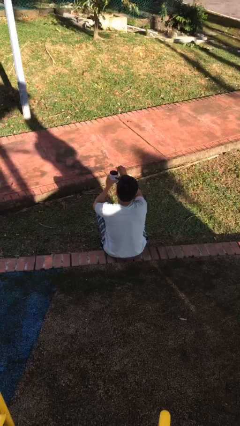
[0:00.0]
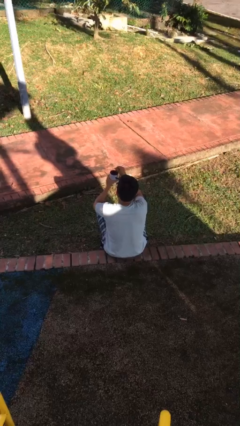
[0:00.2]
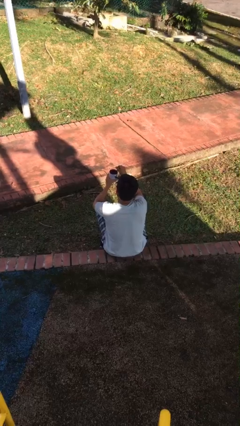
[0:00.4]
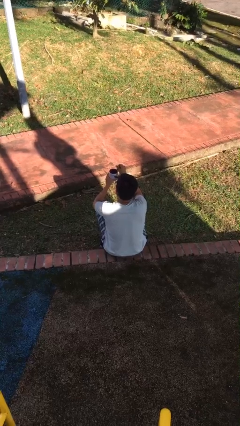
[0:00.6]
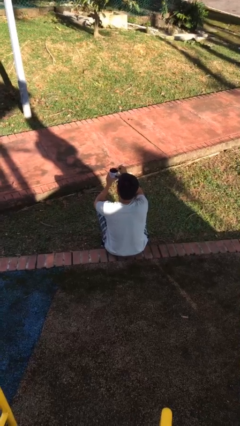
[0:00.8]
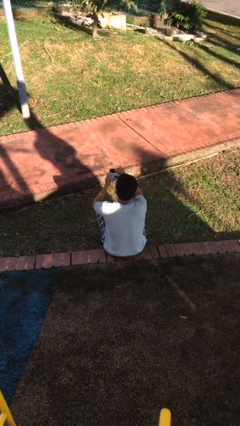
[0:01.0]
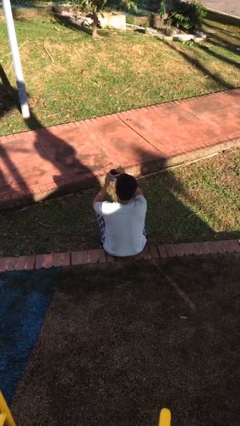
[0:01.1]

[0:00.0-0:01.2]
person stirs mug

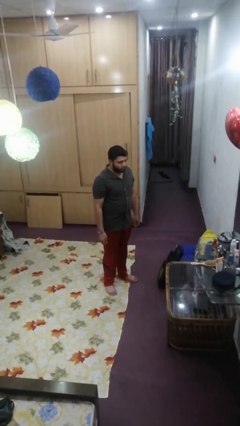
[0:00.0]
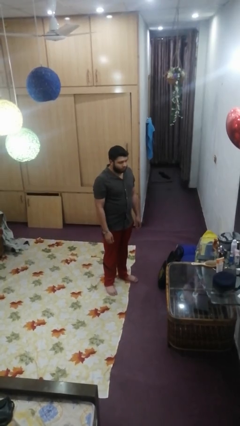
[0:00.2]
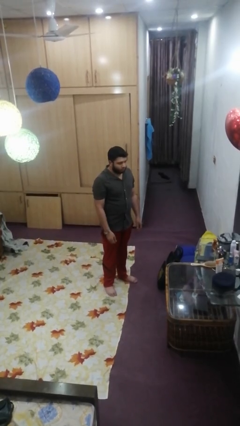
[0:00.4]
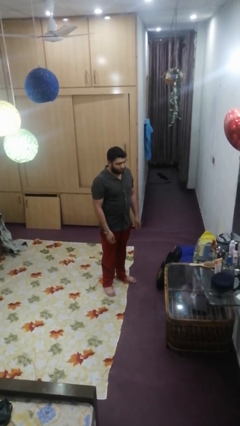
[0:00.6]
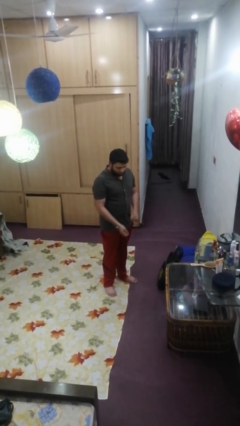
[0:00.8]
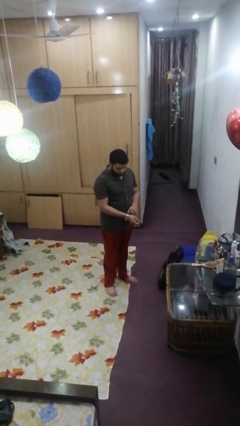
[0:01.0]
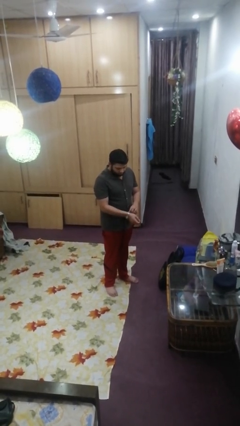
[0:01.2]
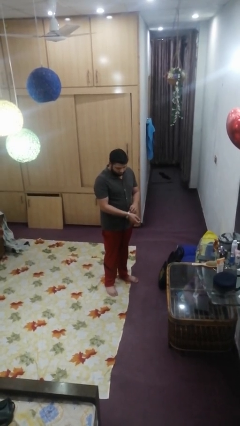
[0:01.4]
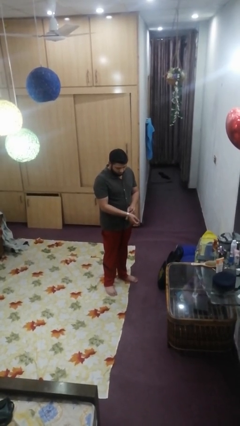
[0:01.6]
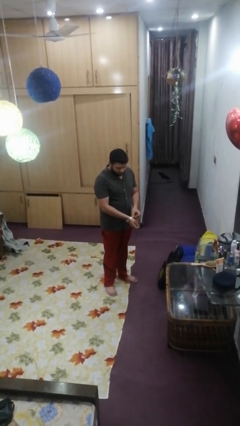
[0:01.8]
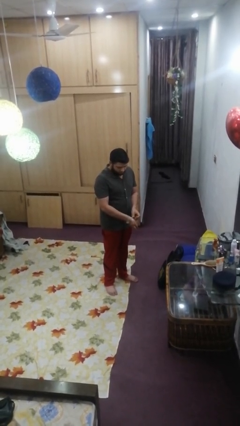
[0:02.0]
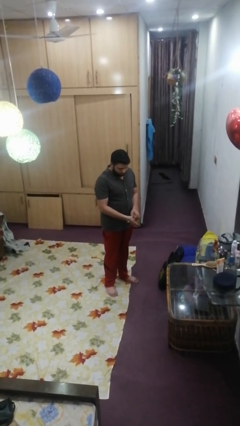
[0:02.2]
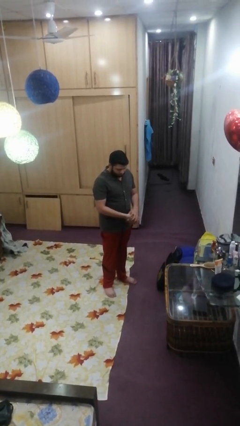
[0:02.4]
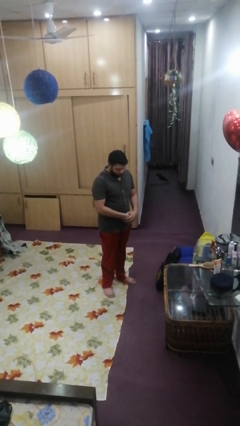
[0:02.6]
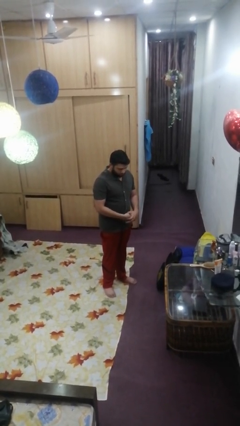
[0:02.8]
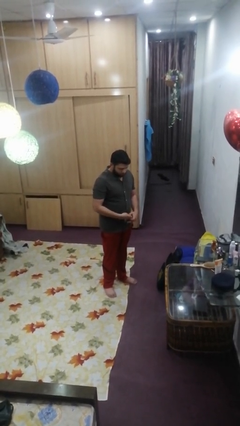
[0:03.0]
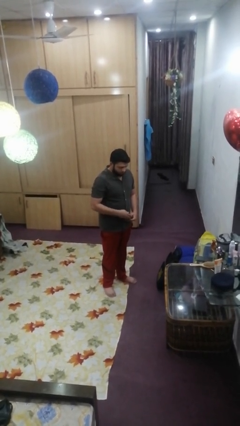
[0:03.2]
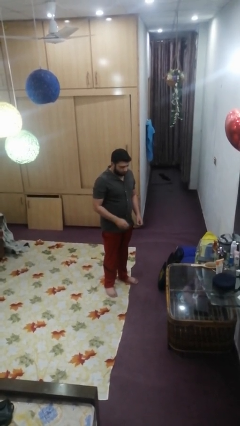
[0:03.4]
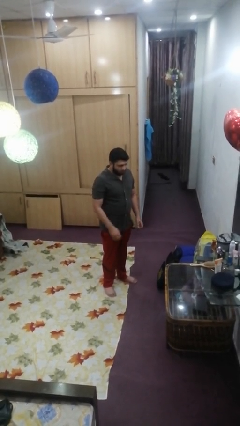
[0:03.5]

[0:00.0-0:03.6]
person takes off wristwatch

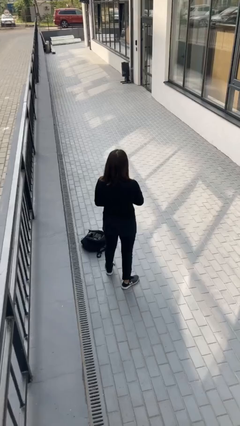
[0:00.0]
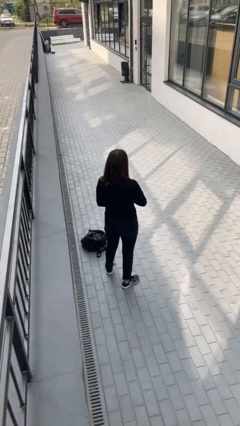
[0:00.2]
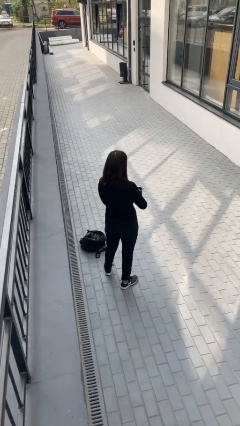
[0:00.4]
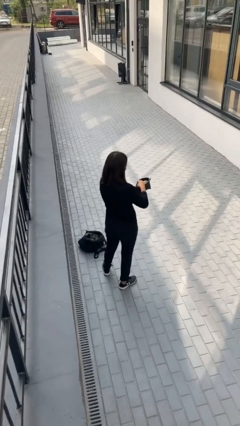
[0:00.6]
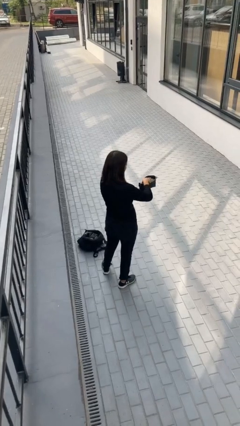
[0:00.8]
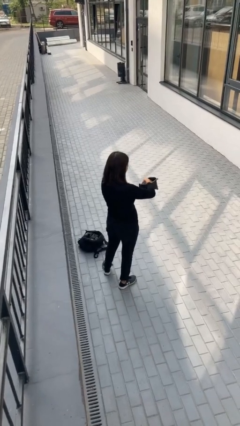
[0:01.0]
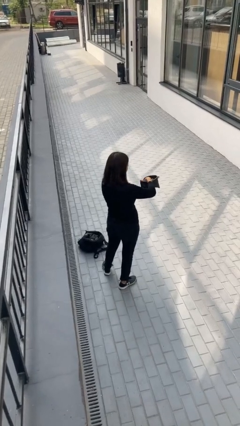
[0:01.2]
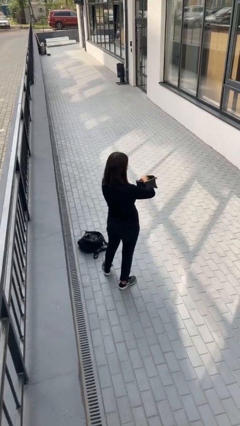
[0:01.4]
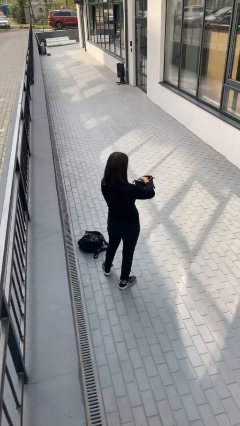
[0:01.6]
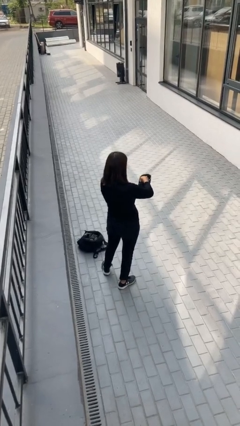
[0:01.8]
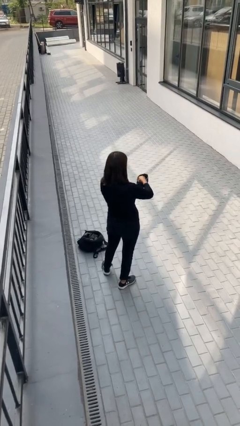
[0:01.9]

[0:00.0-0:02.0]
person searches in purse

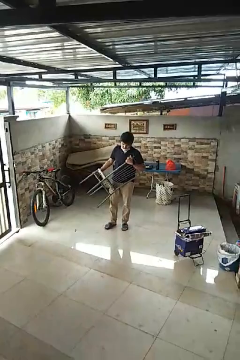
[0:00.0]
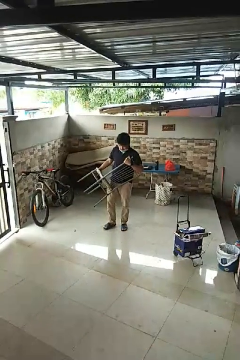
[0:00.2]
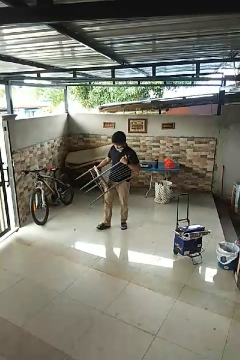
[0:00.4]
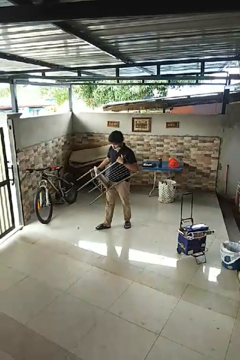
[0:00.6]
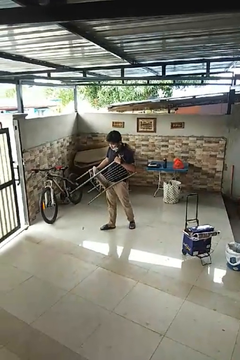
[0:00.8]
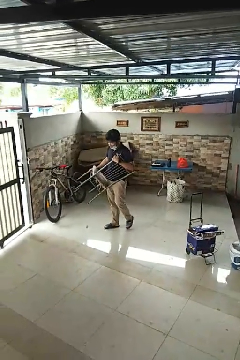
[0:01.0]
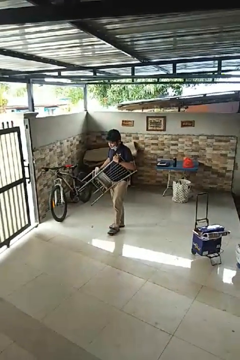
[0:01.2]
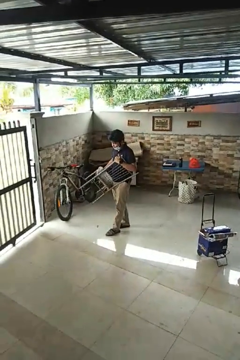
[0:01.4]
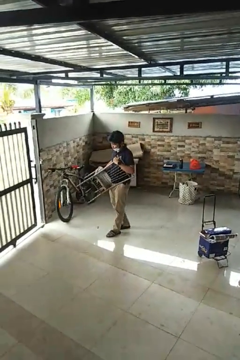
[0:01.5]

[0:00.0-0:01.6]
person carries furniture

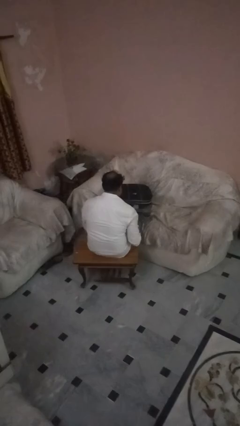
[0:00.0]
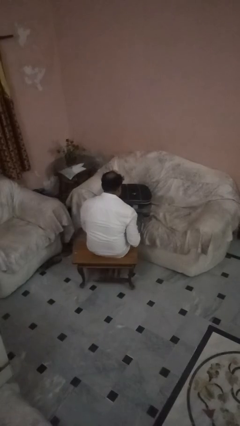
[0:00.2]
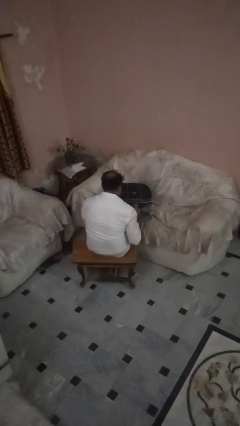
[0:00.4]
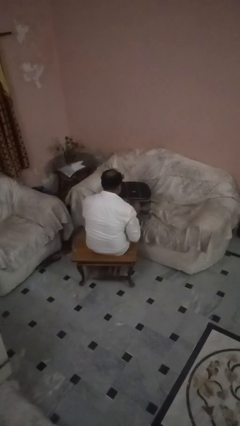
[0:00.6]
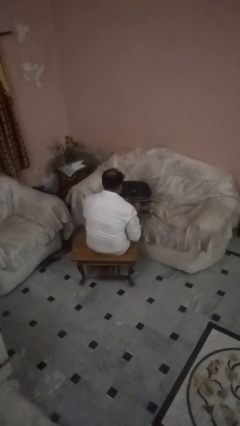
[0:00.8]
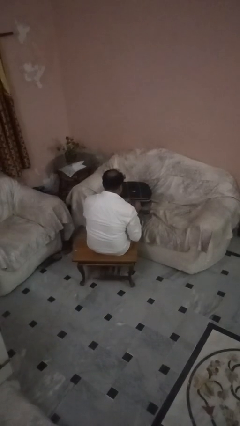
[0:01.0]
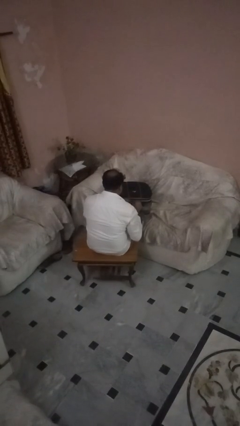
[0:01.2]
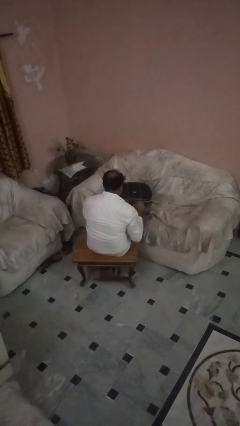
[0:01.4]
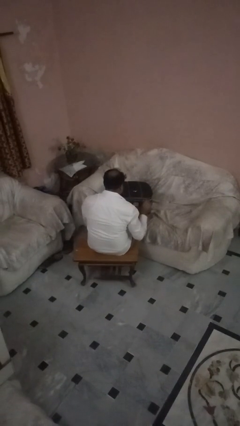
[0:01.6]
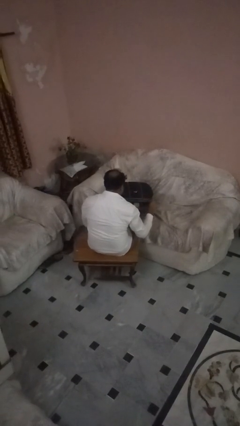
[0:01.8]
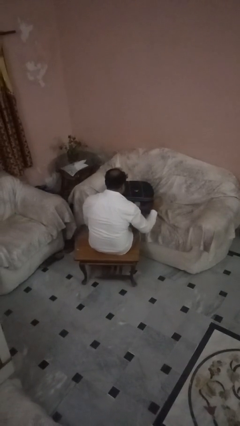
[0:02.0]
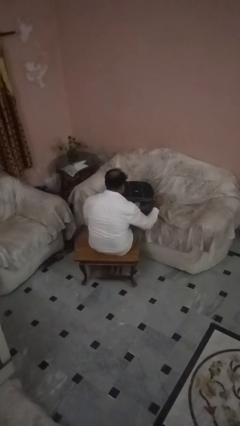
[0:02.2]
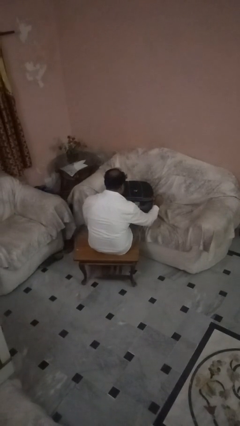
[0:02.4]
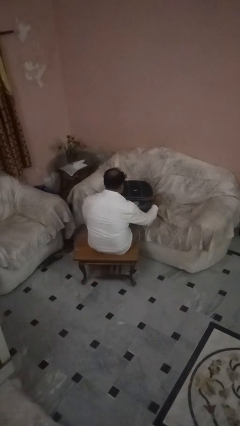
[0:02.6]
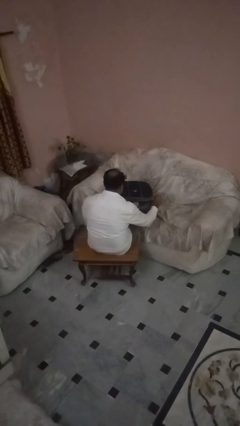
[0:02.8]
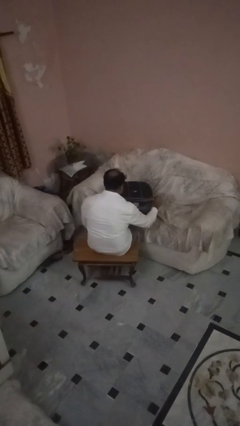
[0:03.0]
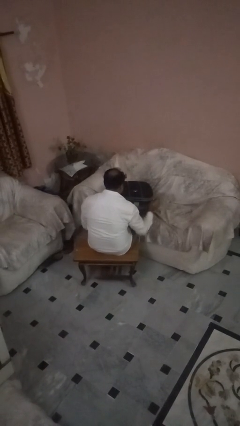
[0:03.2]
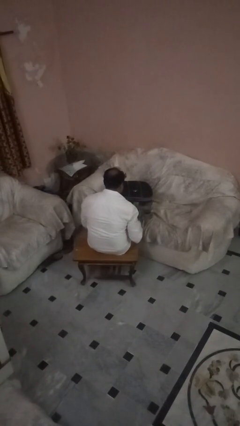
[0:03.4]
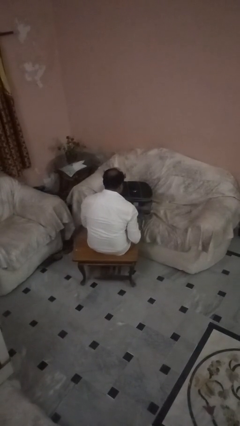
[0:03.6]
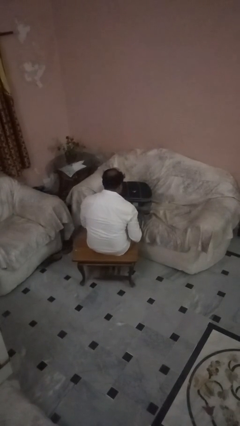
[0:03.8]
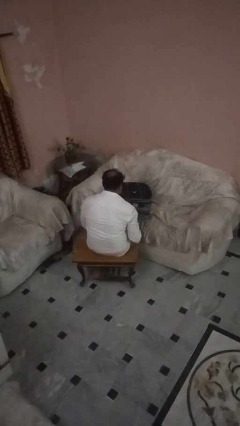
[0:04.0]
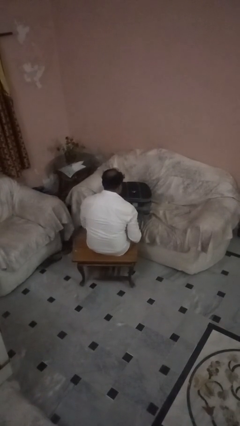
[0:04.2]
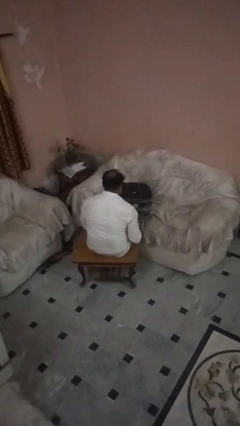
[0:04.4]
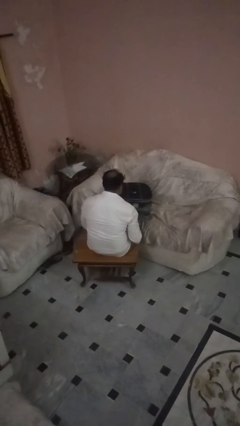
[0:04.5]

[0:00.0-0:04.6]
person opens suitcase

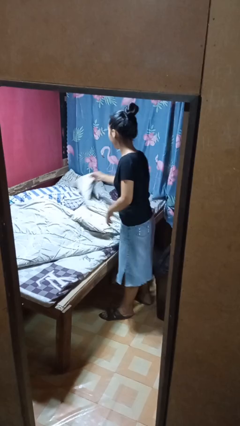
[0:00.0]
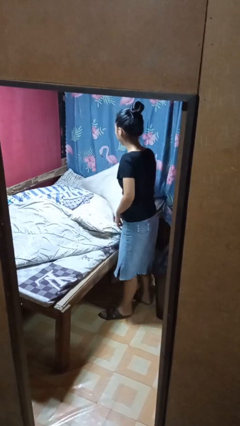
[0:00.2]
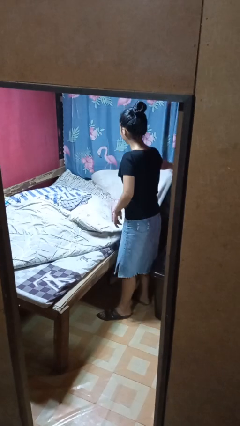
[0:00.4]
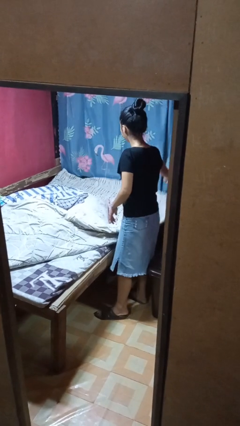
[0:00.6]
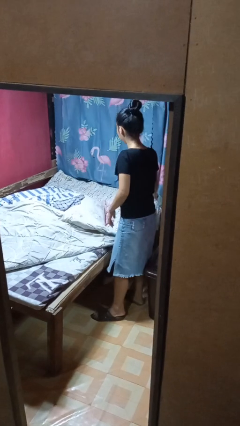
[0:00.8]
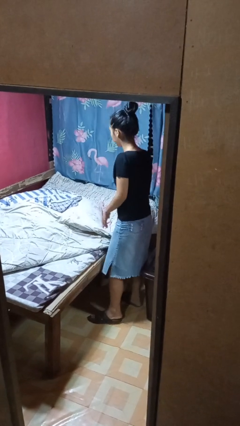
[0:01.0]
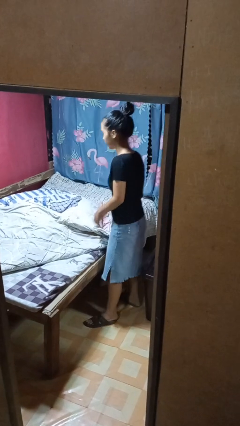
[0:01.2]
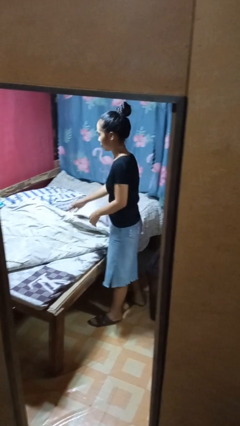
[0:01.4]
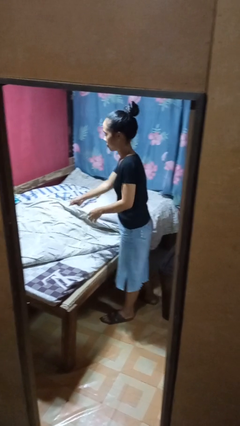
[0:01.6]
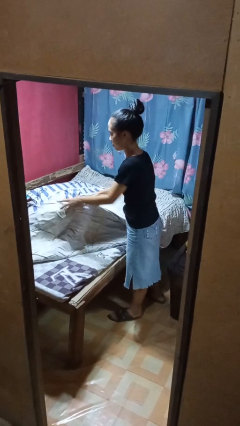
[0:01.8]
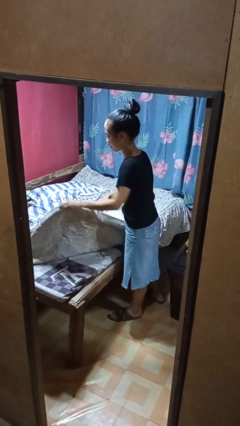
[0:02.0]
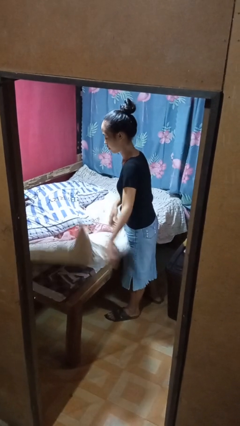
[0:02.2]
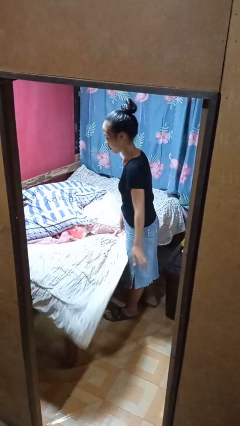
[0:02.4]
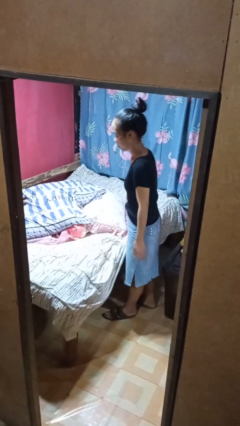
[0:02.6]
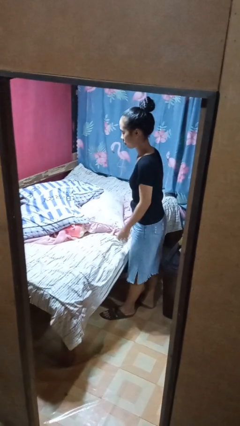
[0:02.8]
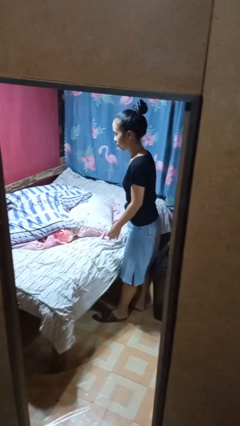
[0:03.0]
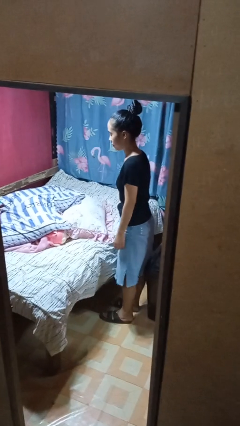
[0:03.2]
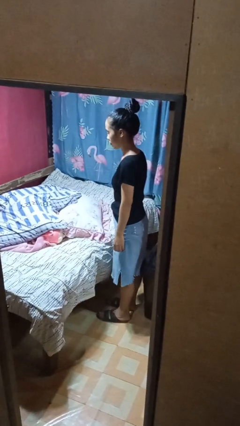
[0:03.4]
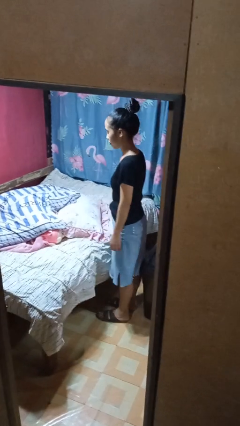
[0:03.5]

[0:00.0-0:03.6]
person makes bed

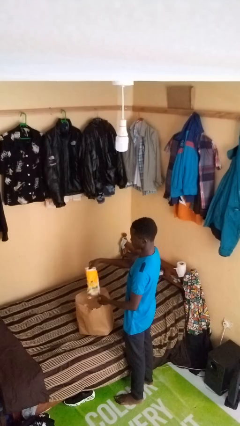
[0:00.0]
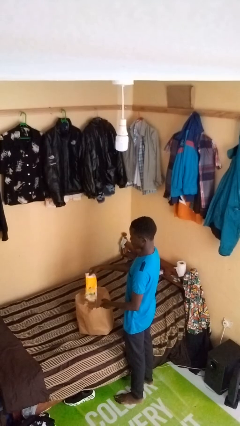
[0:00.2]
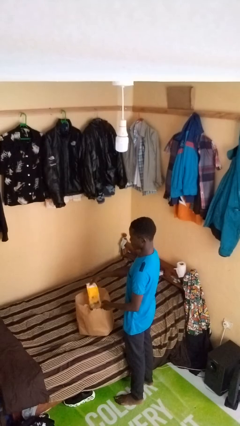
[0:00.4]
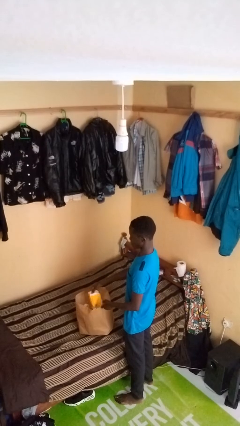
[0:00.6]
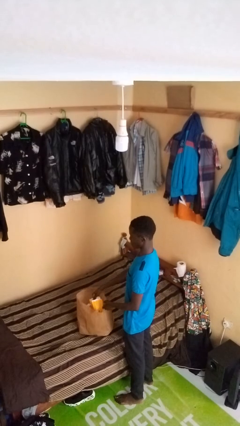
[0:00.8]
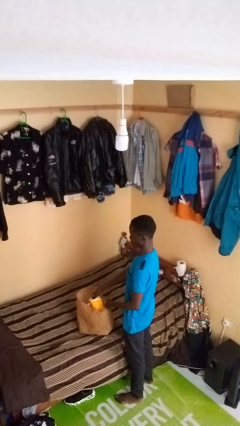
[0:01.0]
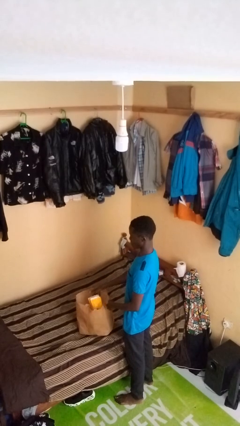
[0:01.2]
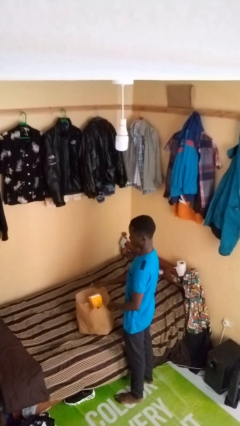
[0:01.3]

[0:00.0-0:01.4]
person puts object into bag
